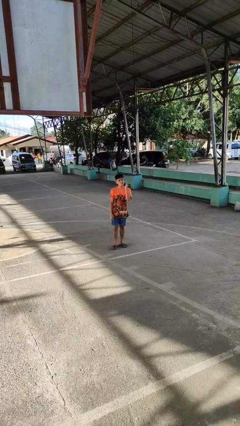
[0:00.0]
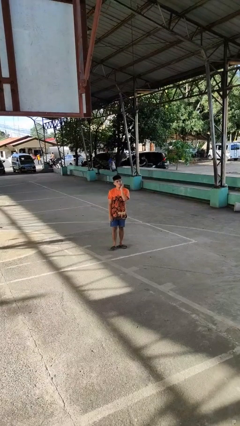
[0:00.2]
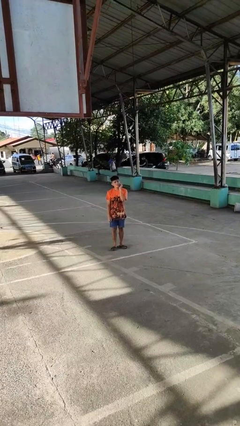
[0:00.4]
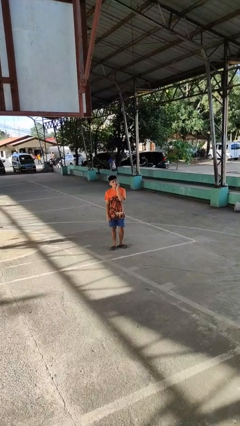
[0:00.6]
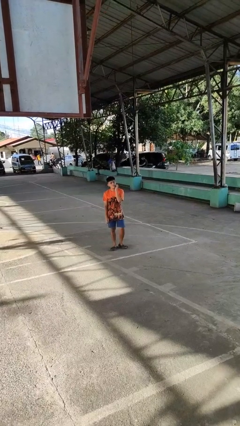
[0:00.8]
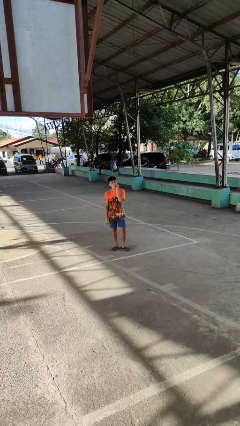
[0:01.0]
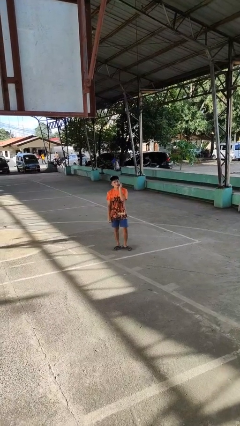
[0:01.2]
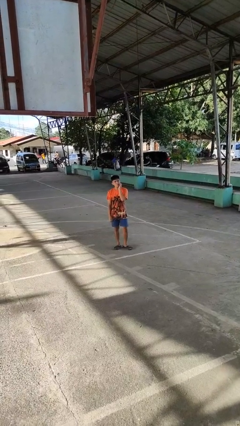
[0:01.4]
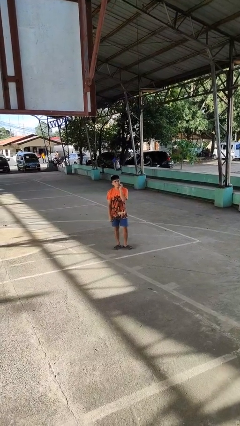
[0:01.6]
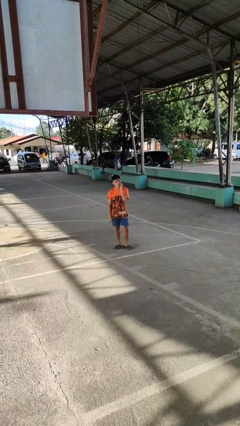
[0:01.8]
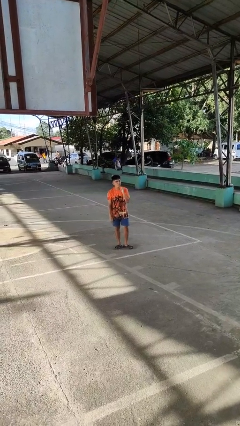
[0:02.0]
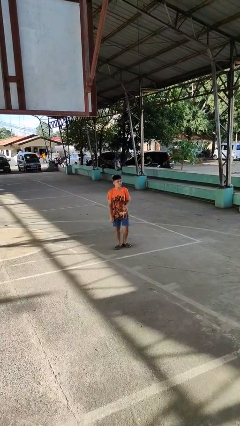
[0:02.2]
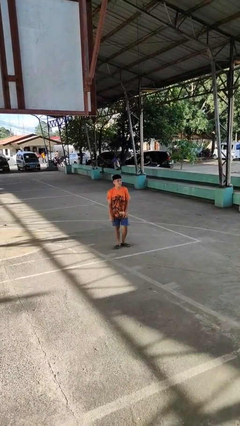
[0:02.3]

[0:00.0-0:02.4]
person scratches face

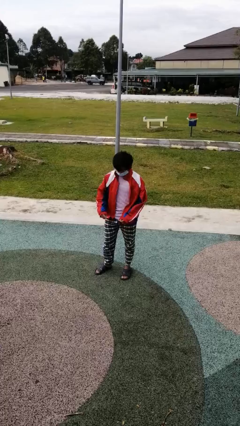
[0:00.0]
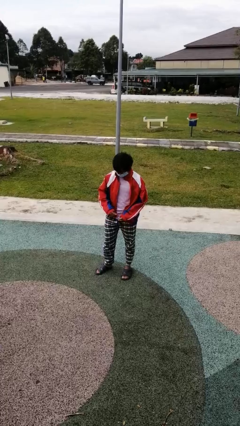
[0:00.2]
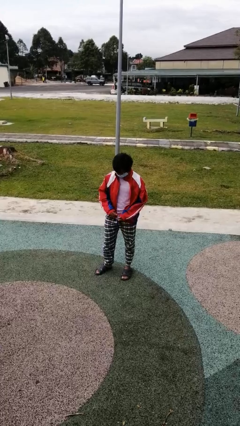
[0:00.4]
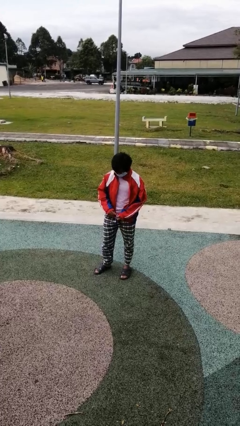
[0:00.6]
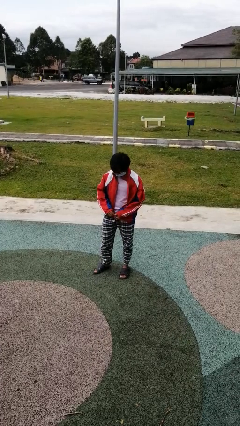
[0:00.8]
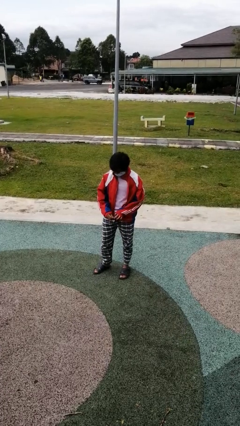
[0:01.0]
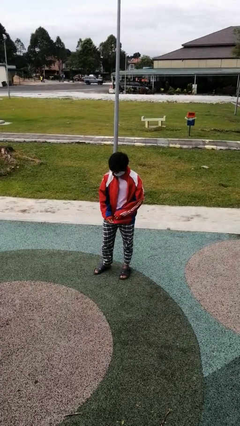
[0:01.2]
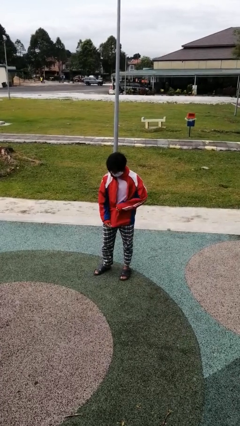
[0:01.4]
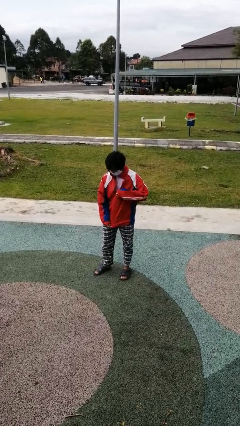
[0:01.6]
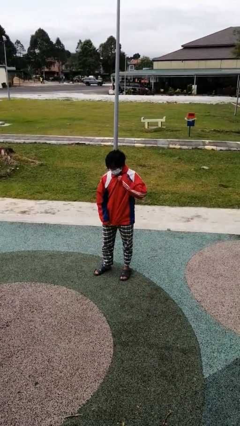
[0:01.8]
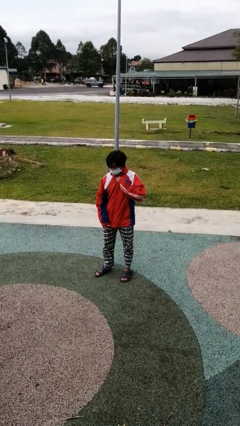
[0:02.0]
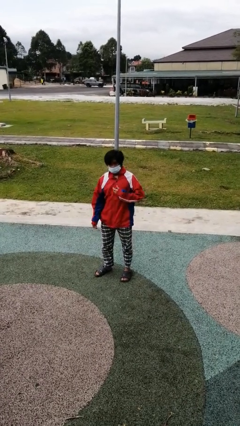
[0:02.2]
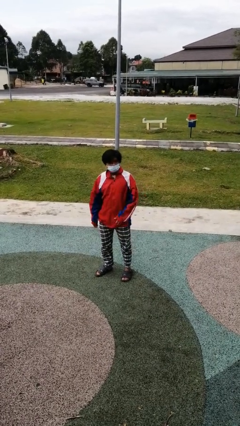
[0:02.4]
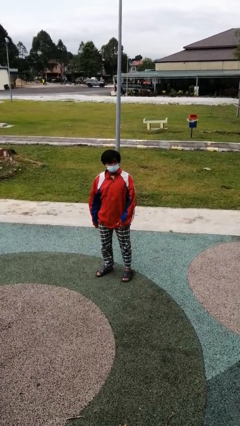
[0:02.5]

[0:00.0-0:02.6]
person zips up jacket

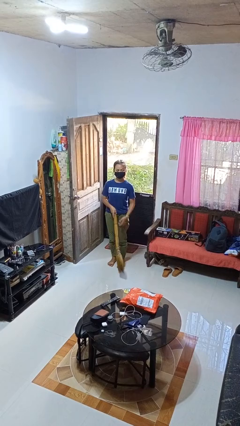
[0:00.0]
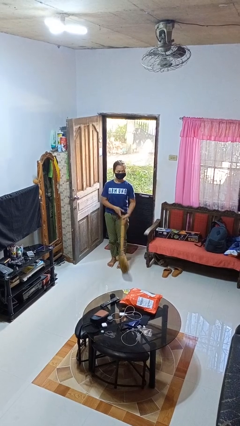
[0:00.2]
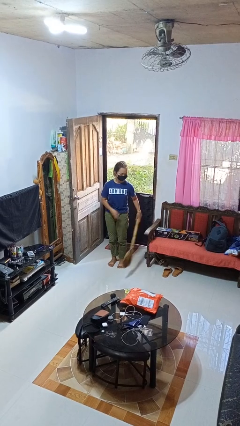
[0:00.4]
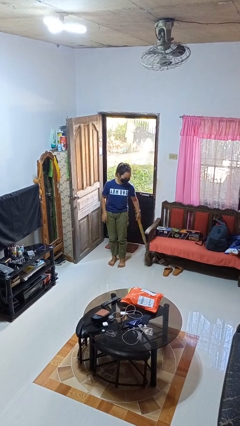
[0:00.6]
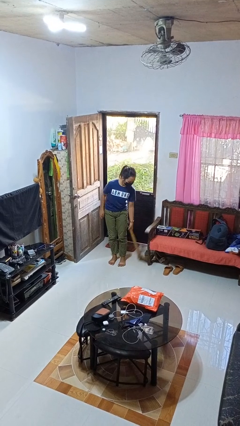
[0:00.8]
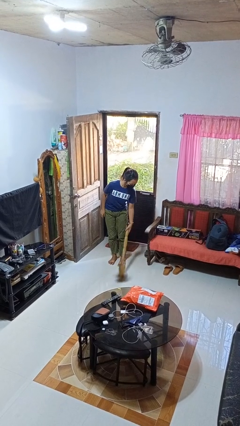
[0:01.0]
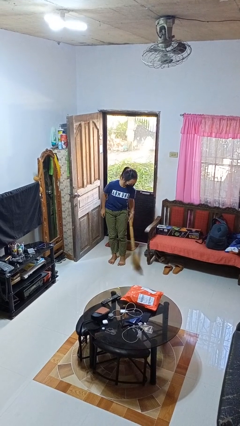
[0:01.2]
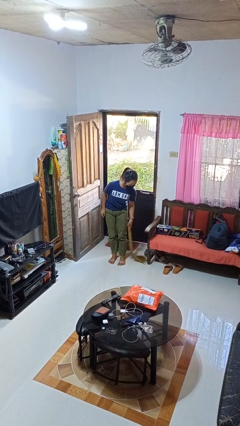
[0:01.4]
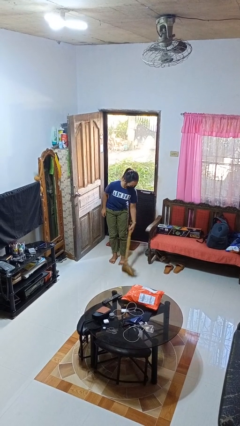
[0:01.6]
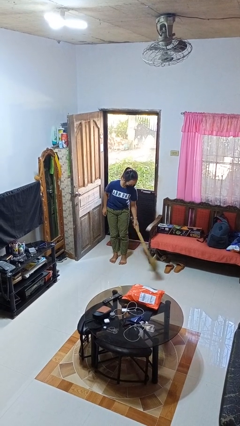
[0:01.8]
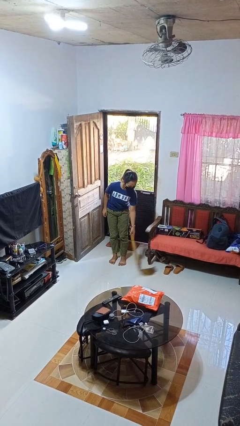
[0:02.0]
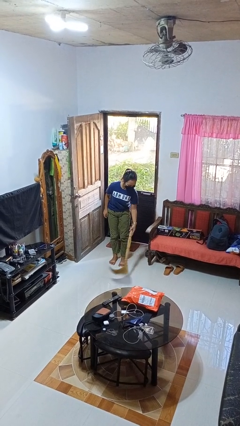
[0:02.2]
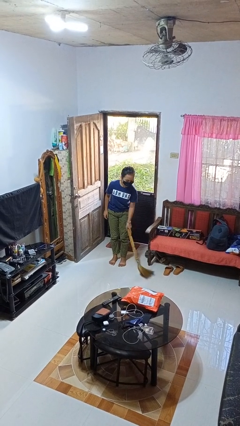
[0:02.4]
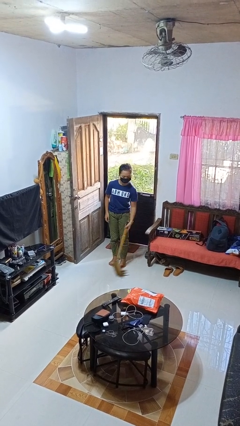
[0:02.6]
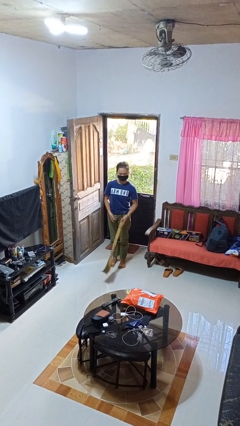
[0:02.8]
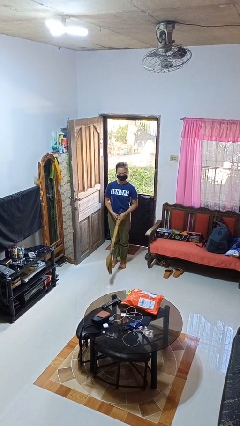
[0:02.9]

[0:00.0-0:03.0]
person sweeps floor

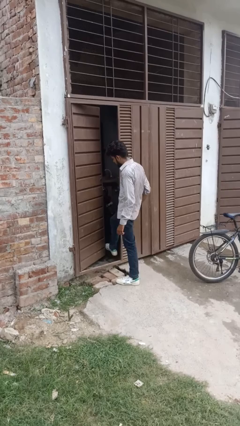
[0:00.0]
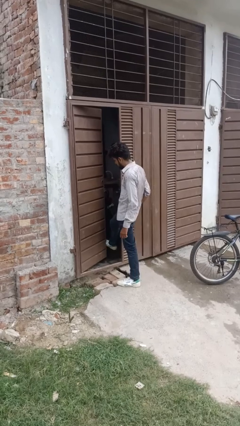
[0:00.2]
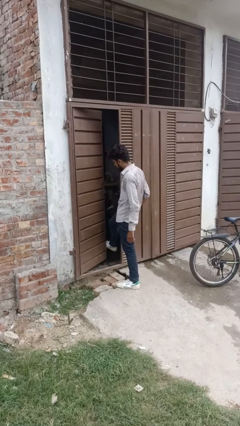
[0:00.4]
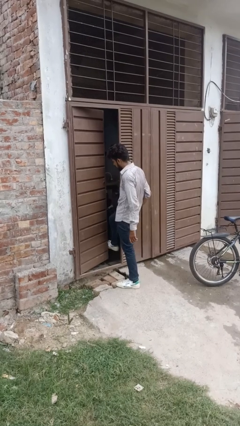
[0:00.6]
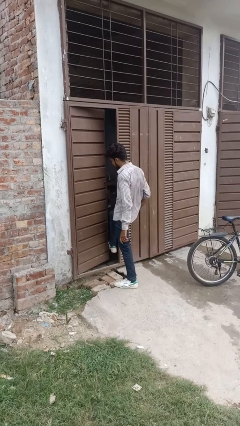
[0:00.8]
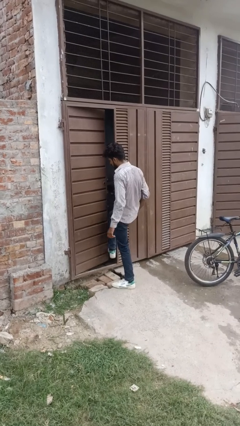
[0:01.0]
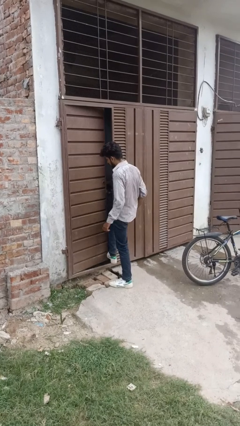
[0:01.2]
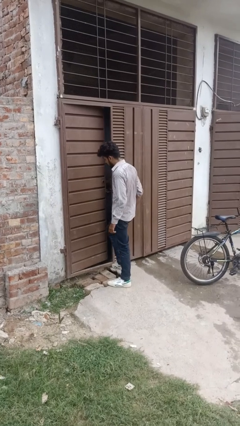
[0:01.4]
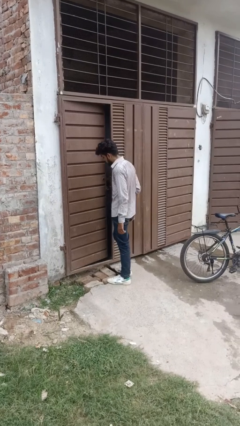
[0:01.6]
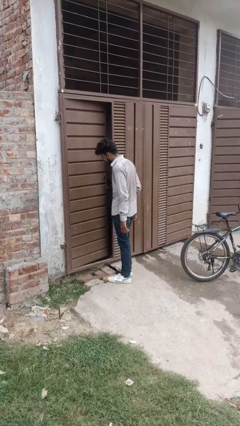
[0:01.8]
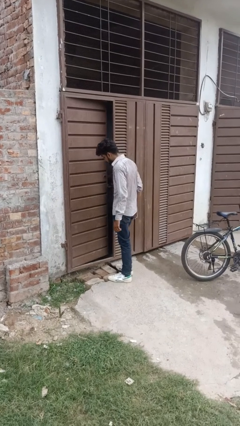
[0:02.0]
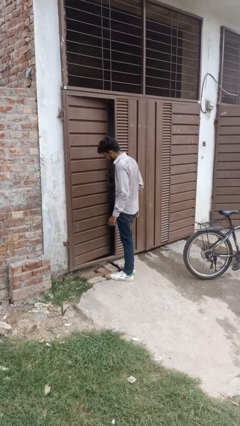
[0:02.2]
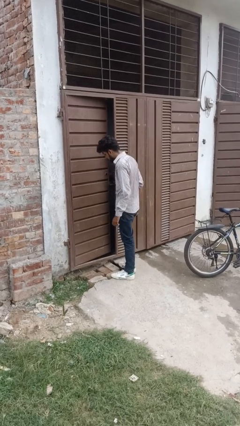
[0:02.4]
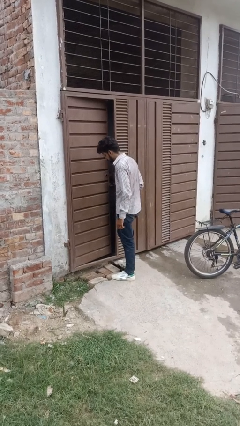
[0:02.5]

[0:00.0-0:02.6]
person closes door with foot

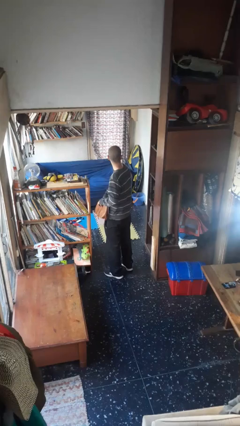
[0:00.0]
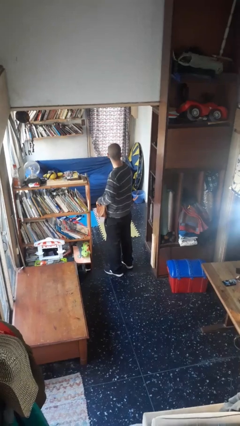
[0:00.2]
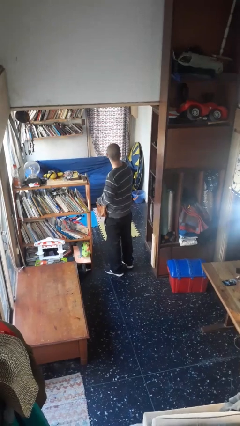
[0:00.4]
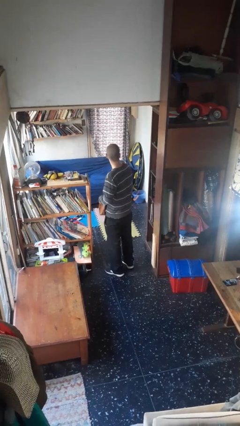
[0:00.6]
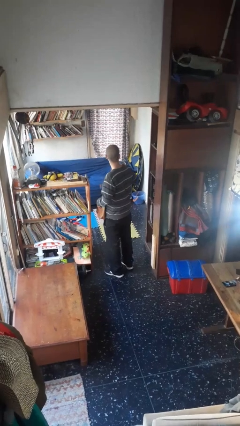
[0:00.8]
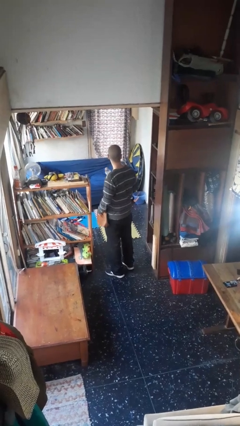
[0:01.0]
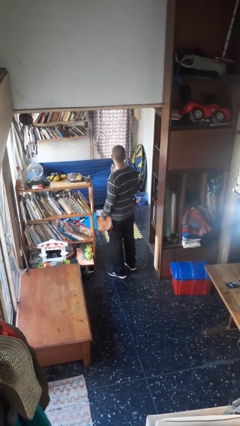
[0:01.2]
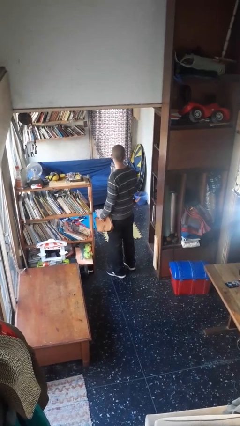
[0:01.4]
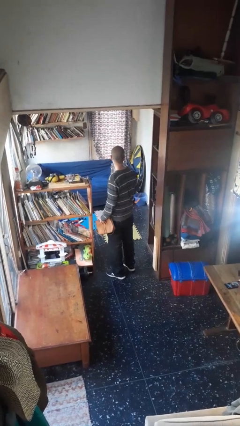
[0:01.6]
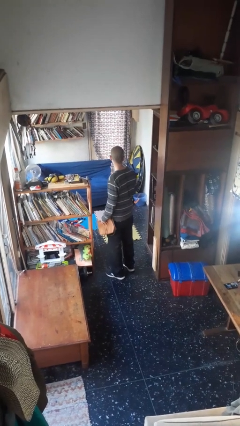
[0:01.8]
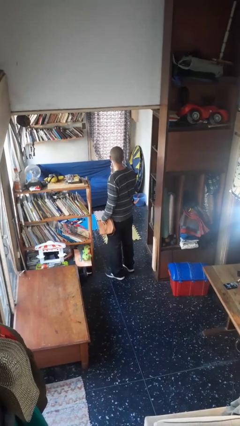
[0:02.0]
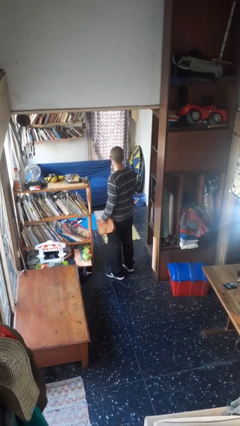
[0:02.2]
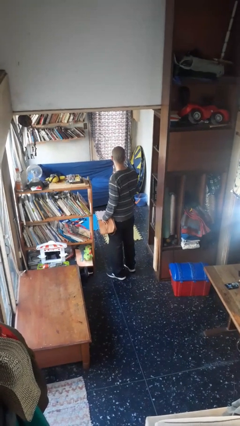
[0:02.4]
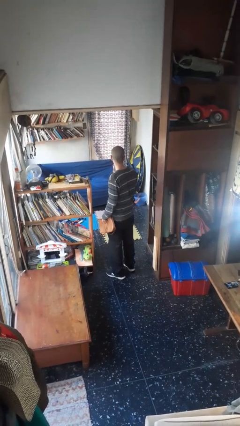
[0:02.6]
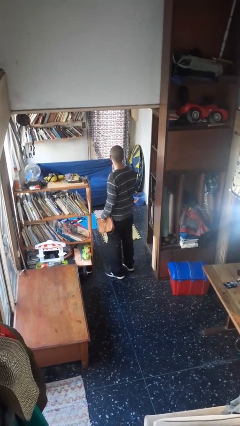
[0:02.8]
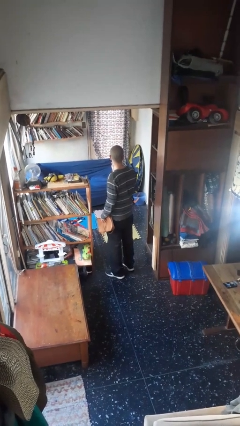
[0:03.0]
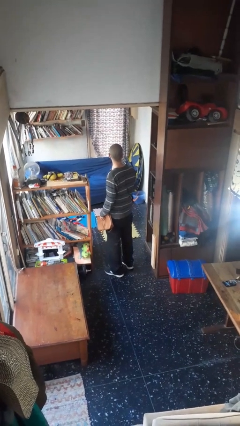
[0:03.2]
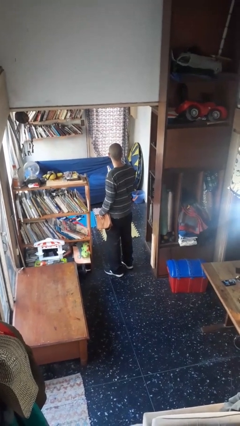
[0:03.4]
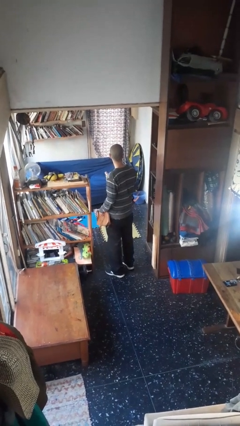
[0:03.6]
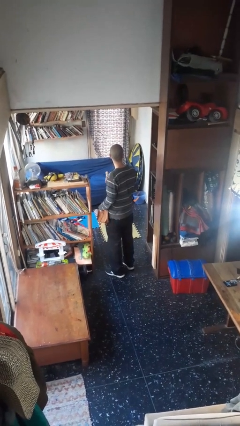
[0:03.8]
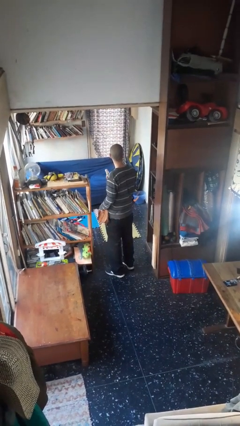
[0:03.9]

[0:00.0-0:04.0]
person takes object from purse

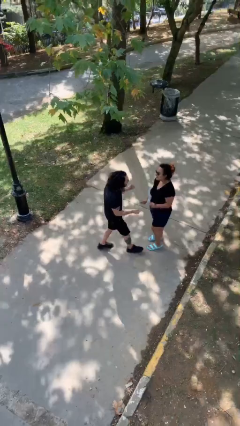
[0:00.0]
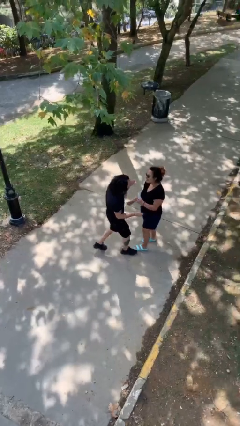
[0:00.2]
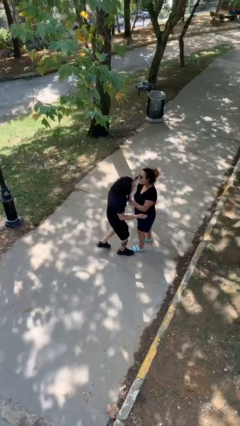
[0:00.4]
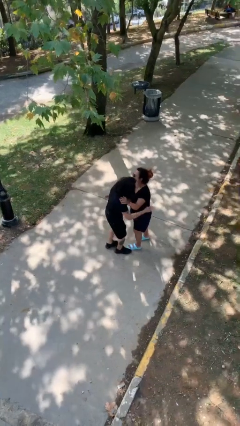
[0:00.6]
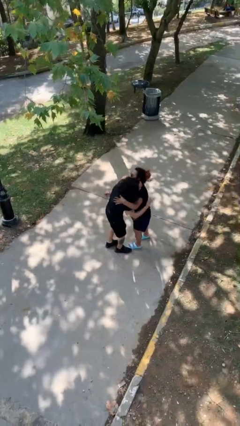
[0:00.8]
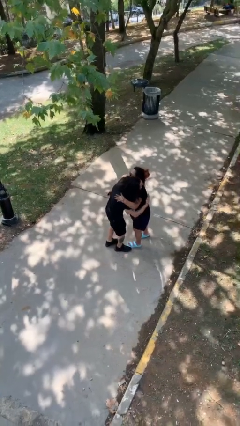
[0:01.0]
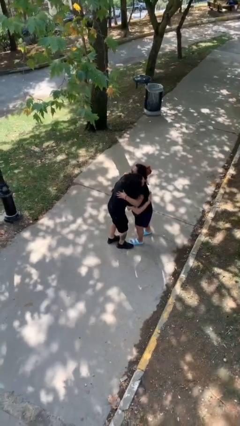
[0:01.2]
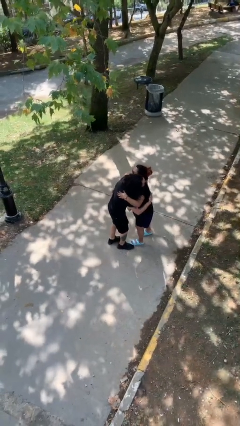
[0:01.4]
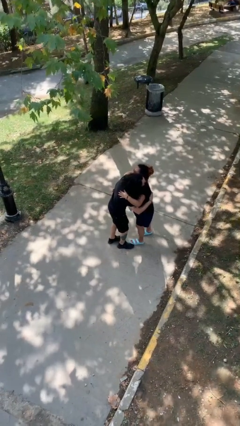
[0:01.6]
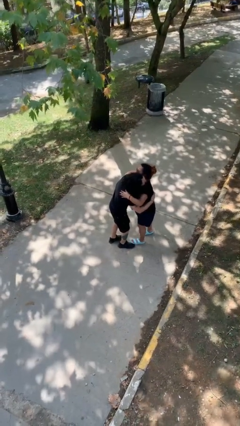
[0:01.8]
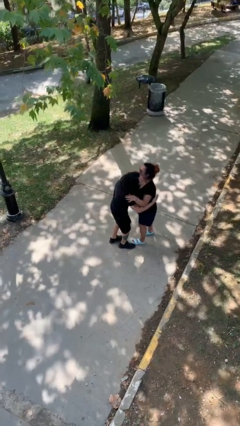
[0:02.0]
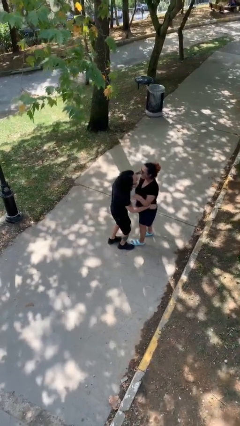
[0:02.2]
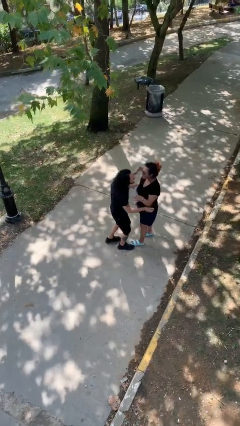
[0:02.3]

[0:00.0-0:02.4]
person embraces person
